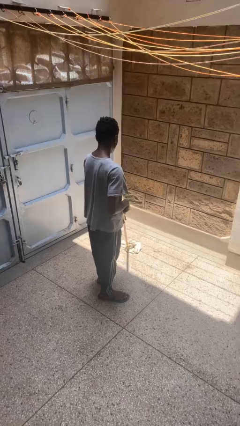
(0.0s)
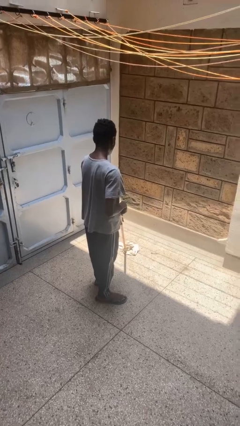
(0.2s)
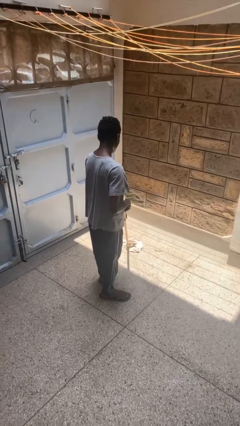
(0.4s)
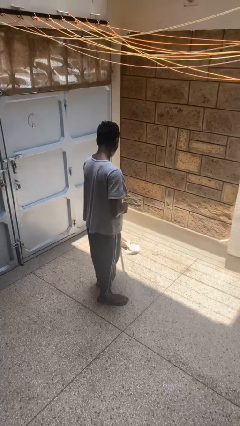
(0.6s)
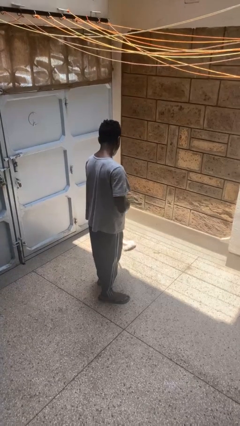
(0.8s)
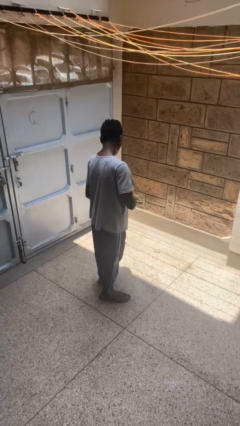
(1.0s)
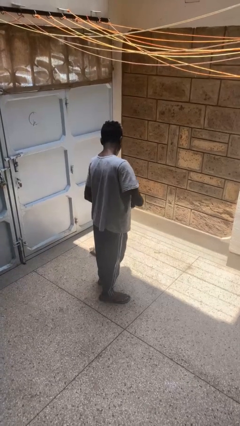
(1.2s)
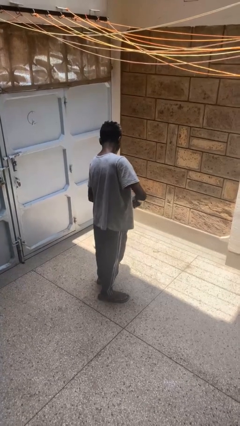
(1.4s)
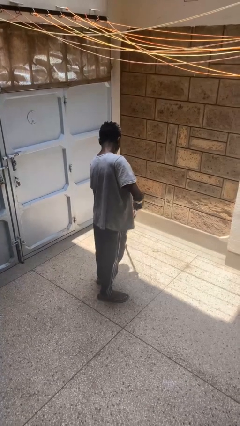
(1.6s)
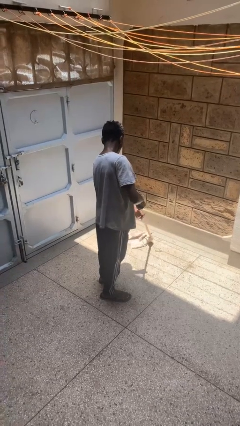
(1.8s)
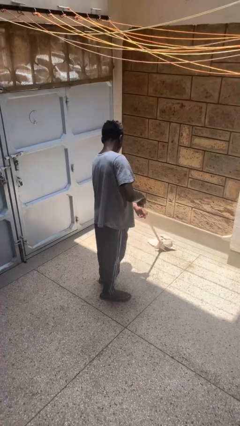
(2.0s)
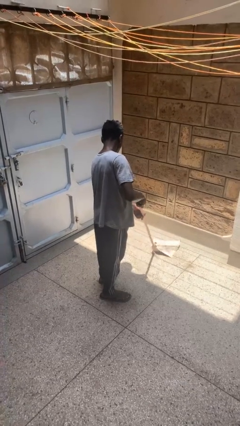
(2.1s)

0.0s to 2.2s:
person mops

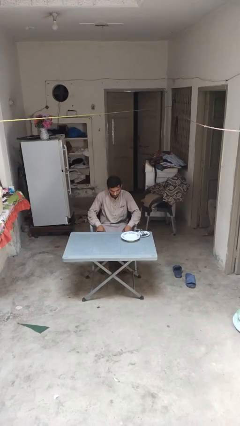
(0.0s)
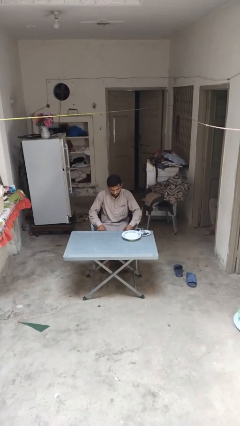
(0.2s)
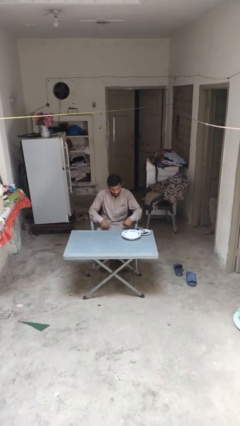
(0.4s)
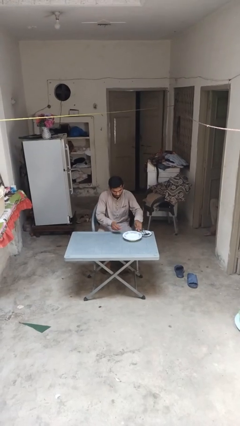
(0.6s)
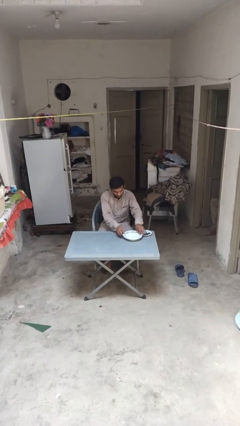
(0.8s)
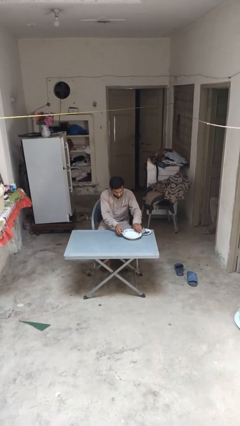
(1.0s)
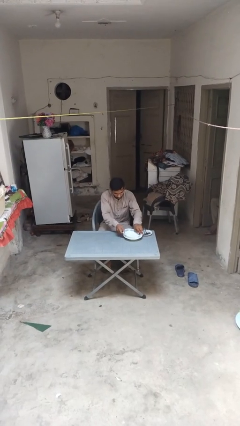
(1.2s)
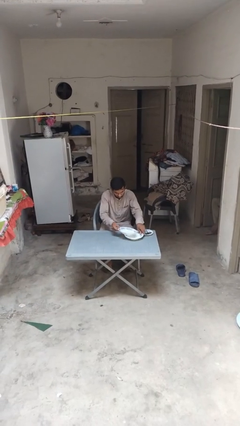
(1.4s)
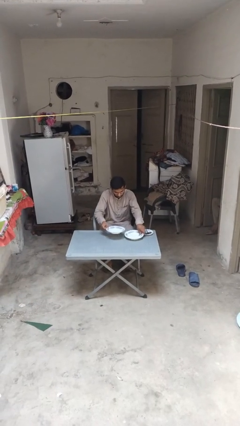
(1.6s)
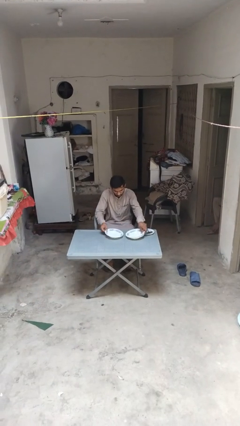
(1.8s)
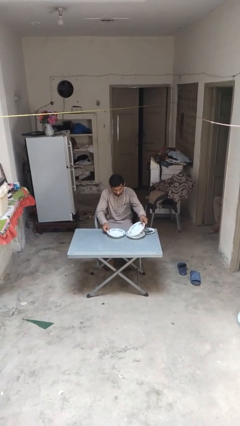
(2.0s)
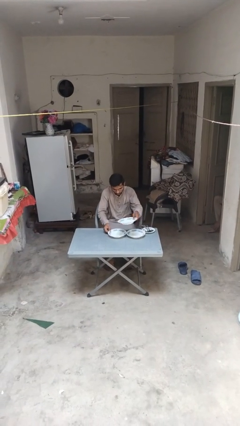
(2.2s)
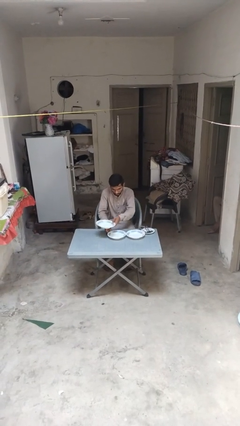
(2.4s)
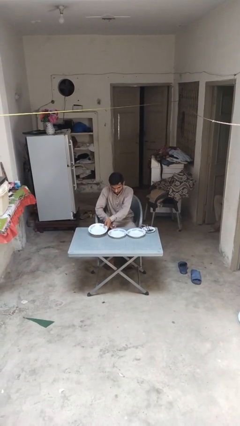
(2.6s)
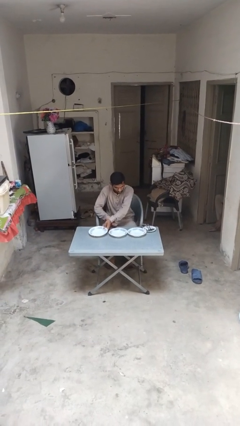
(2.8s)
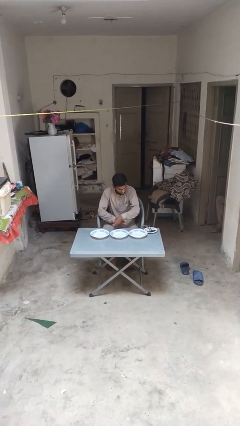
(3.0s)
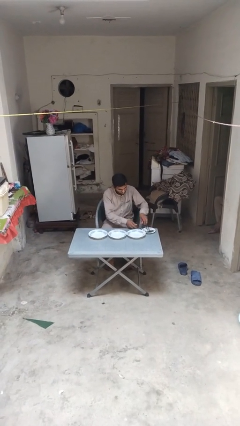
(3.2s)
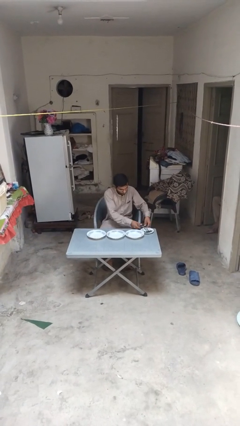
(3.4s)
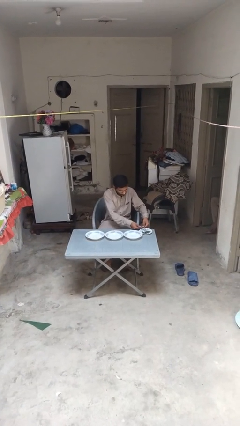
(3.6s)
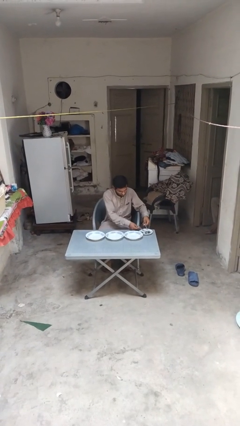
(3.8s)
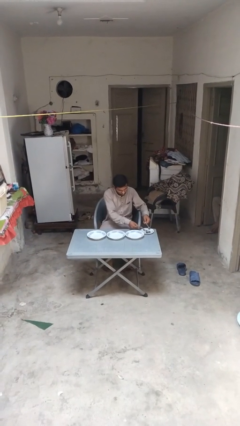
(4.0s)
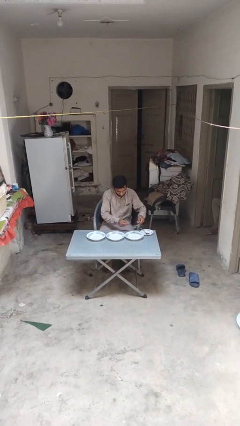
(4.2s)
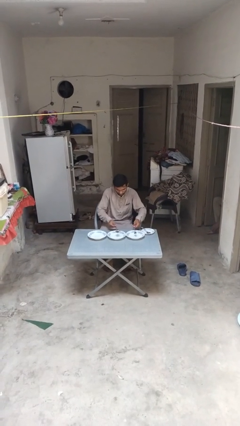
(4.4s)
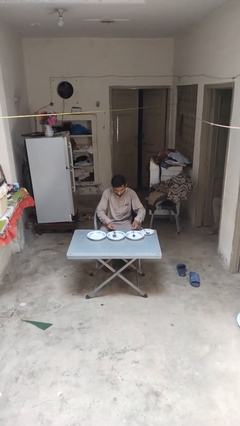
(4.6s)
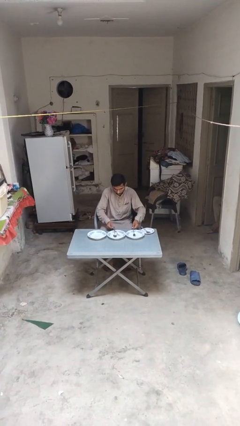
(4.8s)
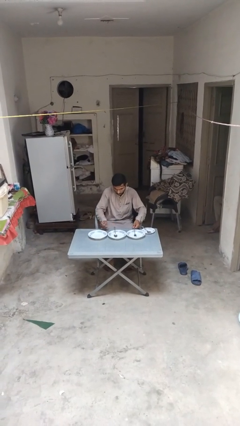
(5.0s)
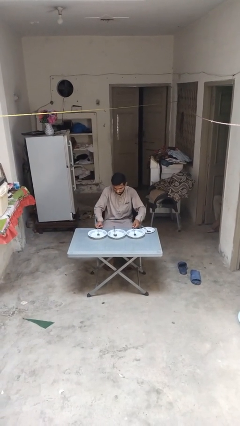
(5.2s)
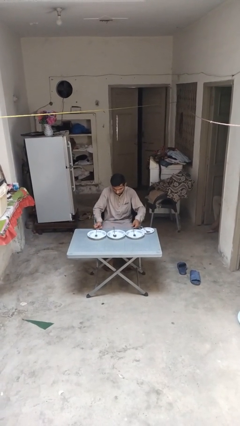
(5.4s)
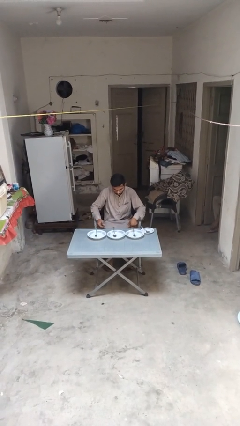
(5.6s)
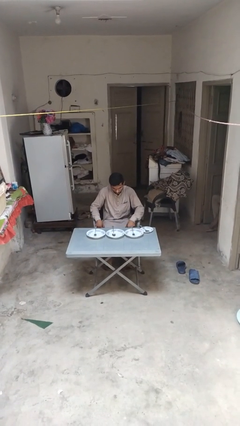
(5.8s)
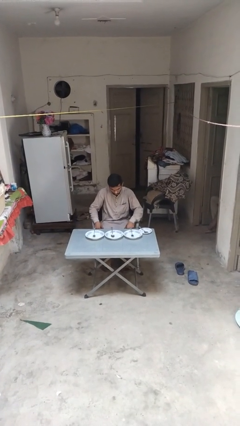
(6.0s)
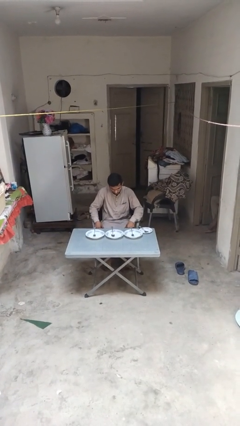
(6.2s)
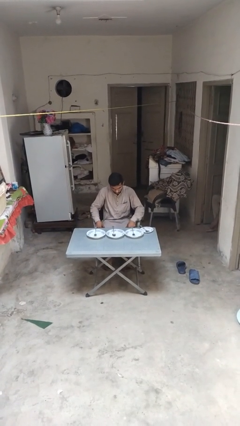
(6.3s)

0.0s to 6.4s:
person sets table

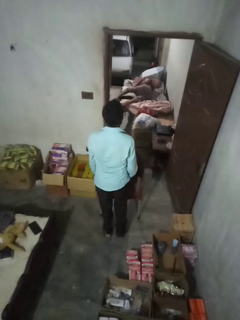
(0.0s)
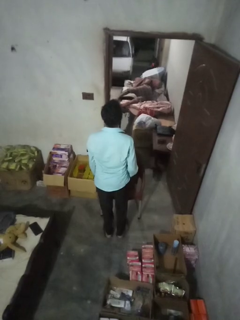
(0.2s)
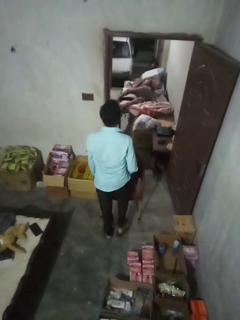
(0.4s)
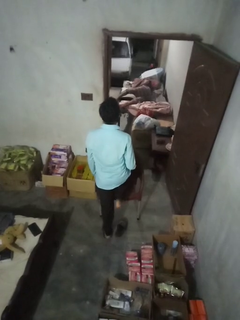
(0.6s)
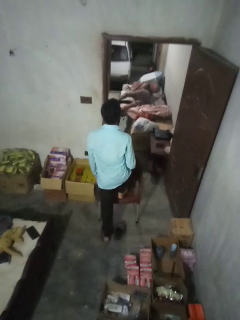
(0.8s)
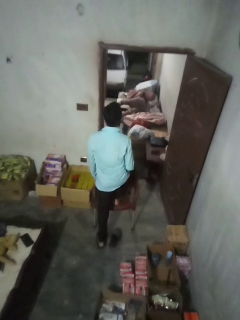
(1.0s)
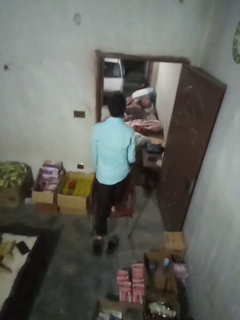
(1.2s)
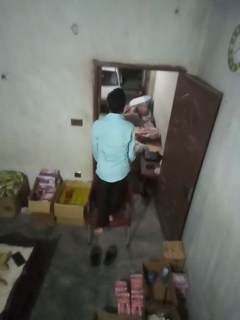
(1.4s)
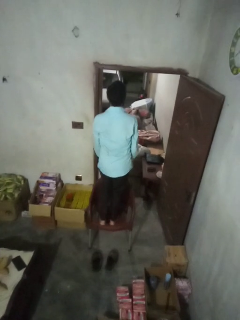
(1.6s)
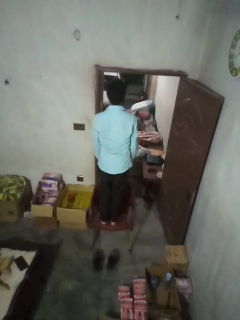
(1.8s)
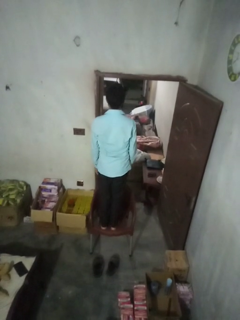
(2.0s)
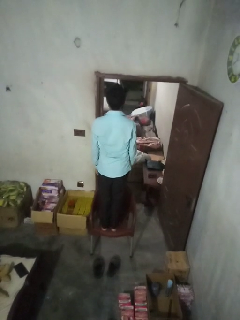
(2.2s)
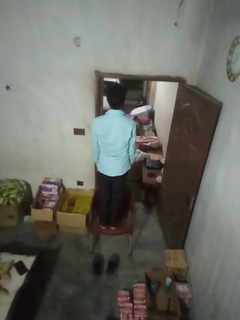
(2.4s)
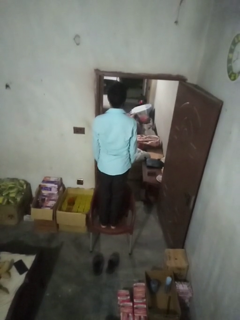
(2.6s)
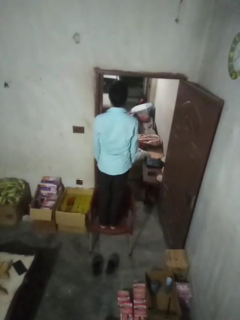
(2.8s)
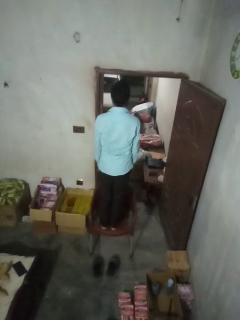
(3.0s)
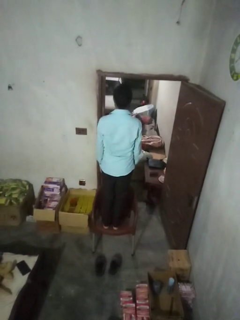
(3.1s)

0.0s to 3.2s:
person climbs on chair

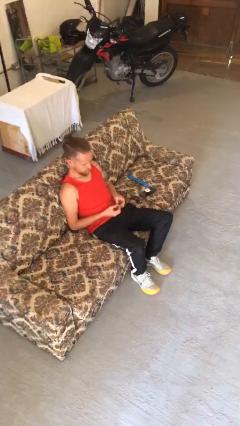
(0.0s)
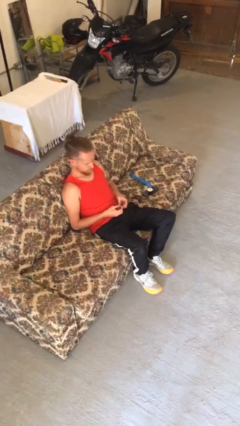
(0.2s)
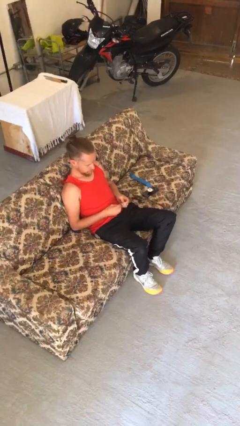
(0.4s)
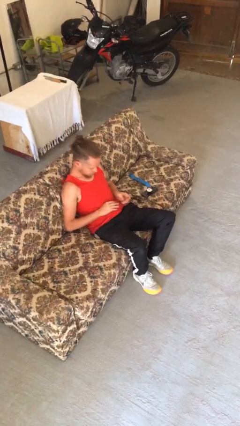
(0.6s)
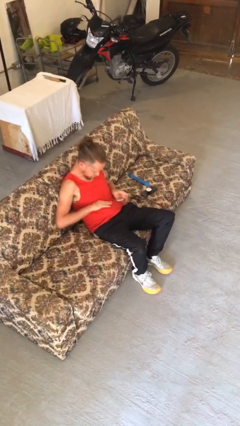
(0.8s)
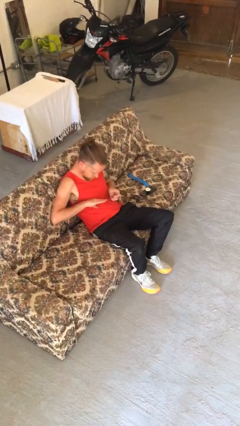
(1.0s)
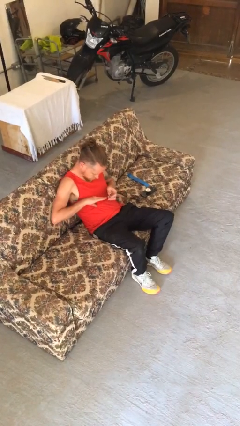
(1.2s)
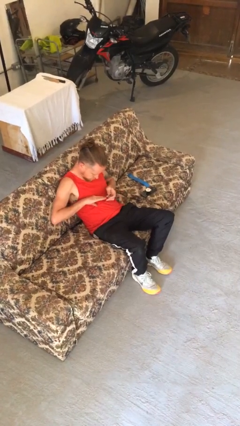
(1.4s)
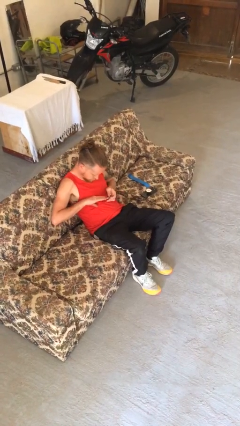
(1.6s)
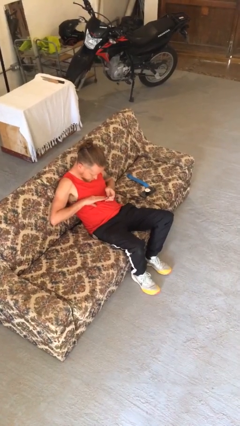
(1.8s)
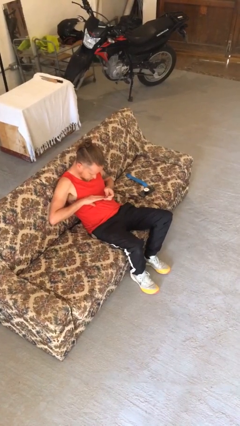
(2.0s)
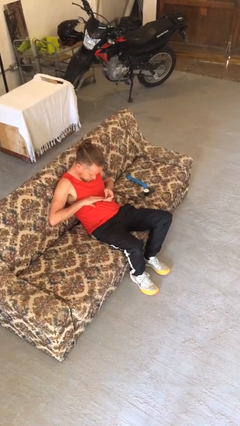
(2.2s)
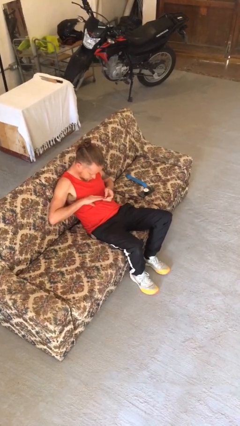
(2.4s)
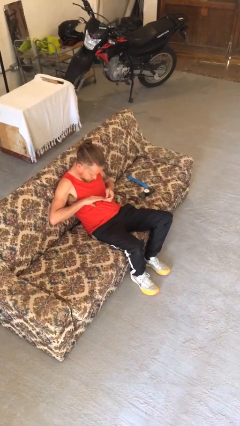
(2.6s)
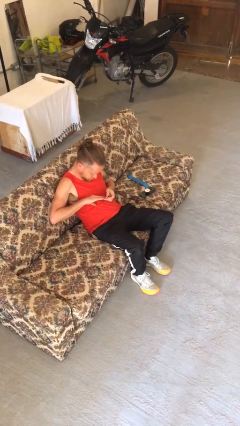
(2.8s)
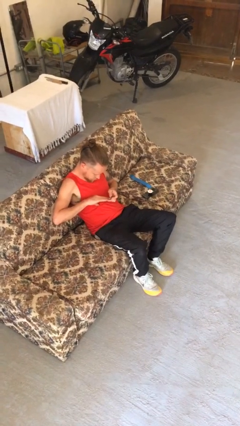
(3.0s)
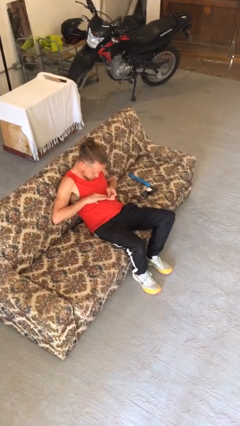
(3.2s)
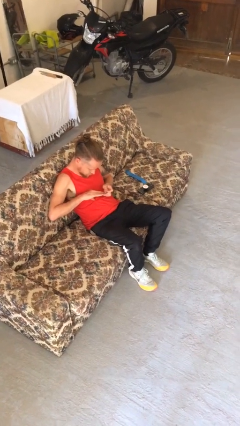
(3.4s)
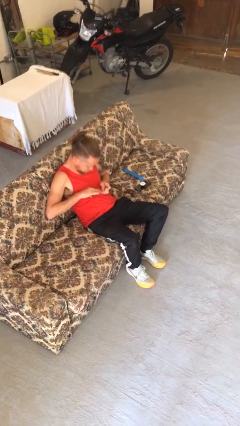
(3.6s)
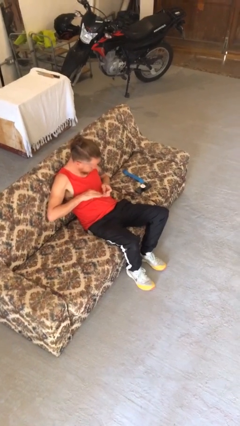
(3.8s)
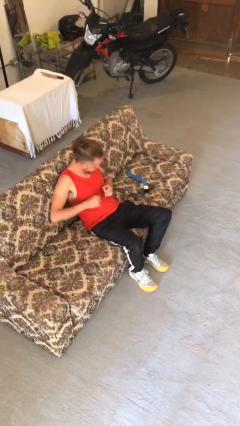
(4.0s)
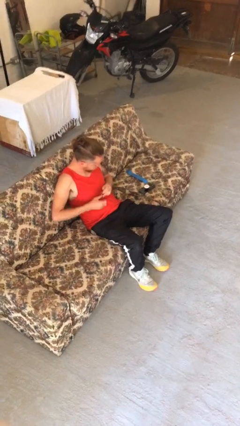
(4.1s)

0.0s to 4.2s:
person clips fingernails

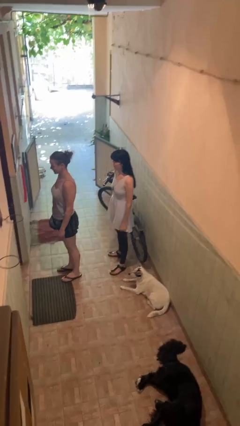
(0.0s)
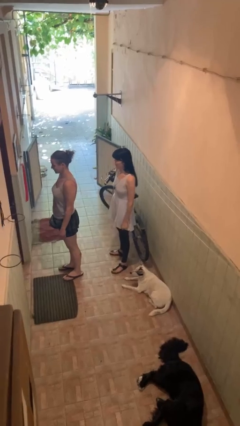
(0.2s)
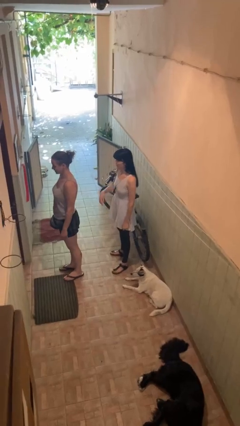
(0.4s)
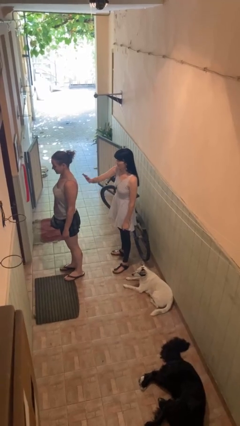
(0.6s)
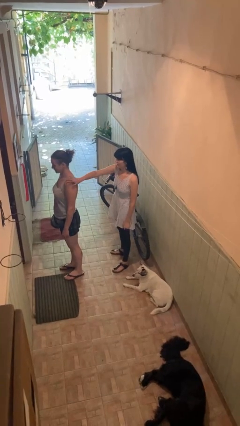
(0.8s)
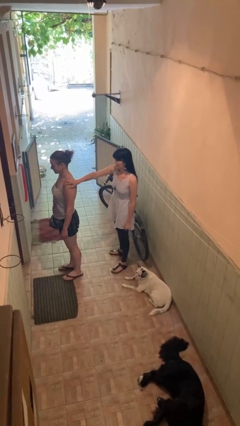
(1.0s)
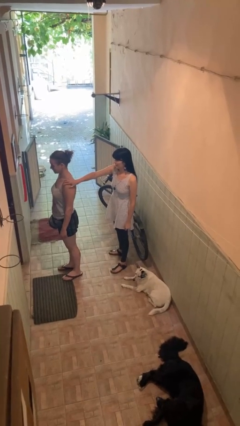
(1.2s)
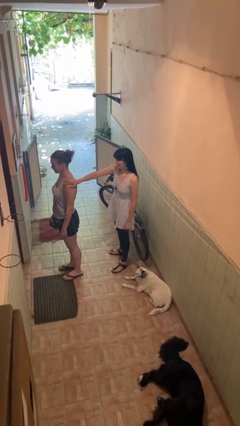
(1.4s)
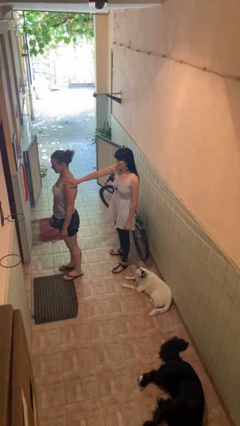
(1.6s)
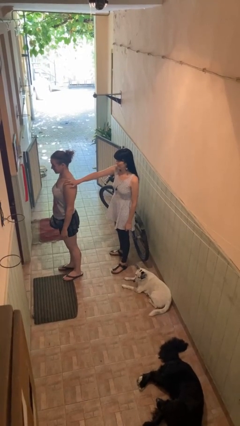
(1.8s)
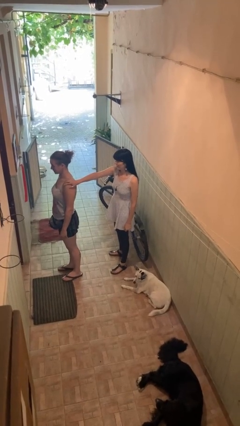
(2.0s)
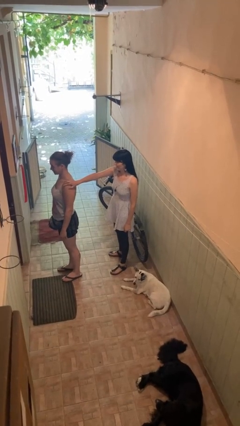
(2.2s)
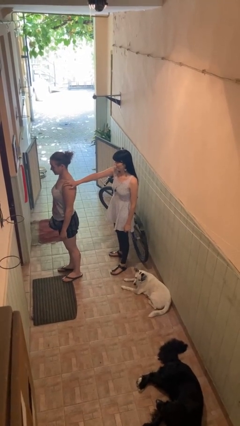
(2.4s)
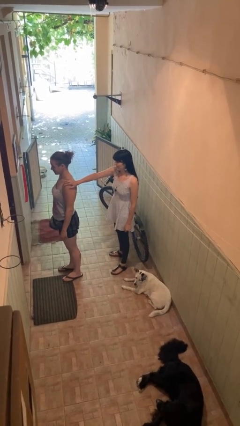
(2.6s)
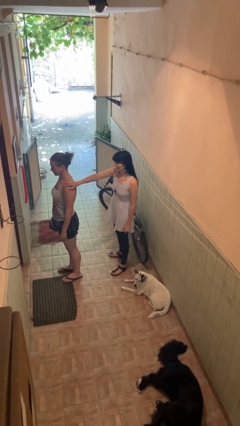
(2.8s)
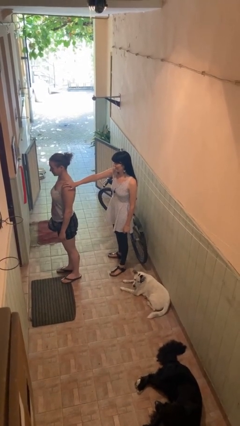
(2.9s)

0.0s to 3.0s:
person grabs person by shoulder
